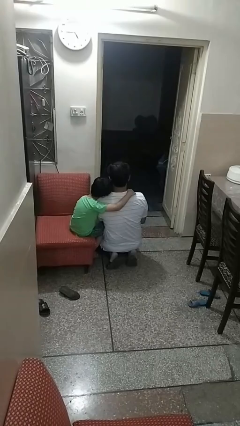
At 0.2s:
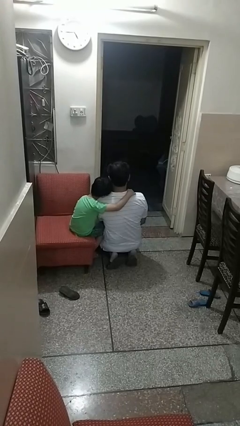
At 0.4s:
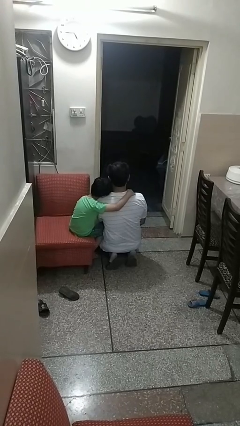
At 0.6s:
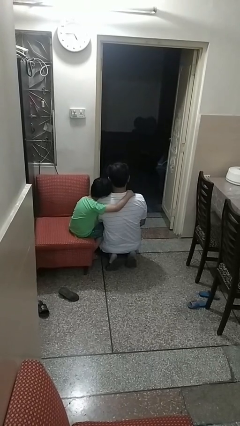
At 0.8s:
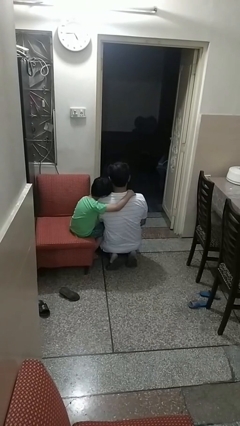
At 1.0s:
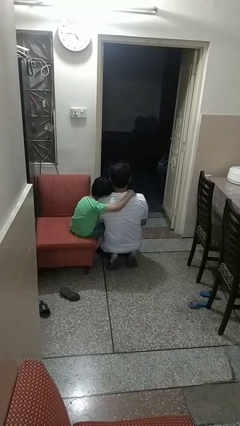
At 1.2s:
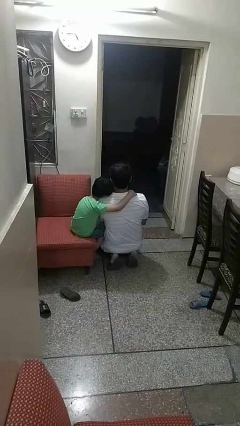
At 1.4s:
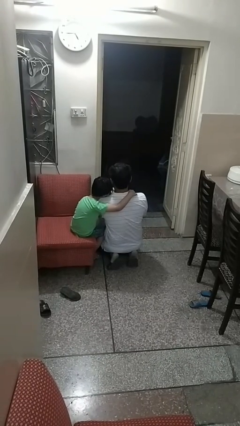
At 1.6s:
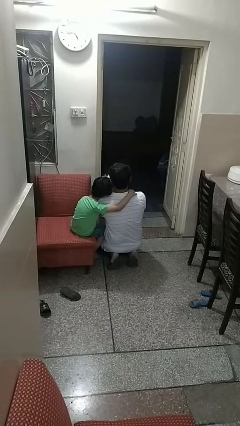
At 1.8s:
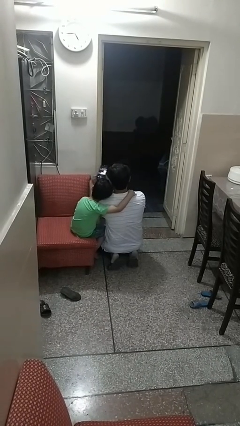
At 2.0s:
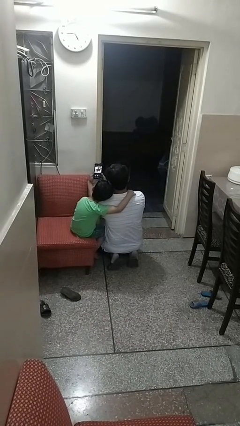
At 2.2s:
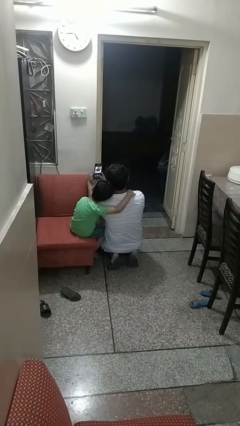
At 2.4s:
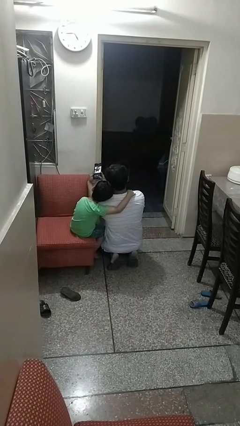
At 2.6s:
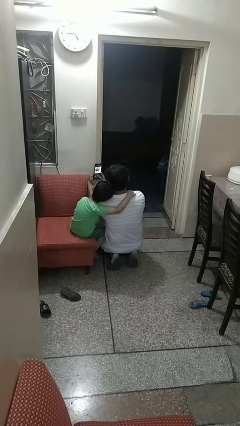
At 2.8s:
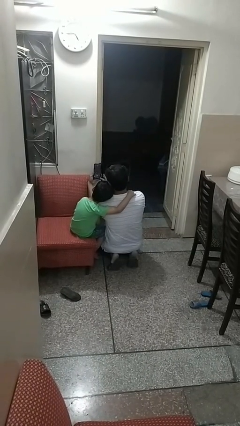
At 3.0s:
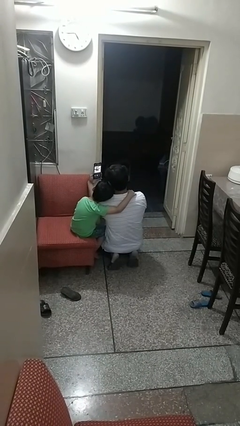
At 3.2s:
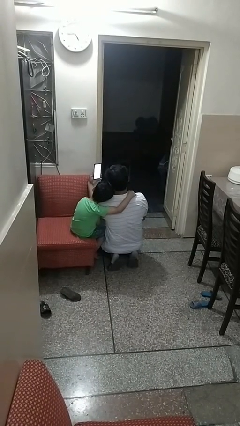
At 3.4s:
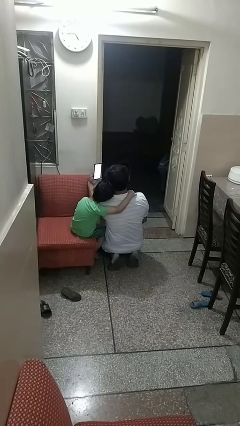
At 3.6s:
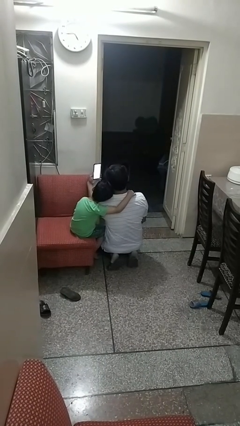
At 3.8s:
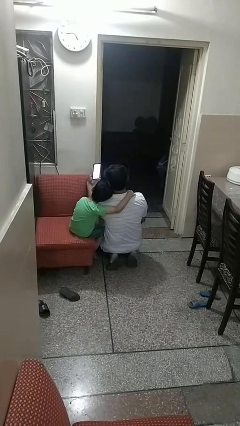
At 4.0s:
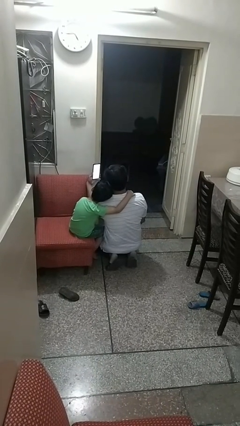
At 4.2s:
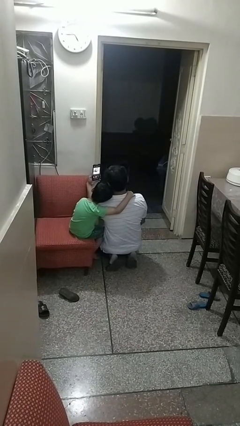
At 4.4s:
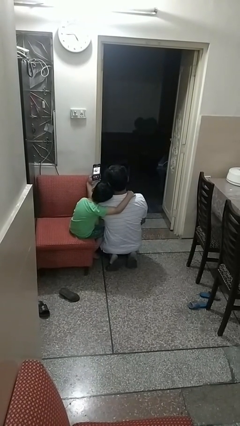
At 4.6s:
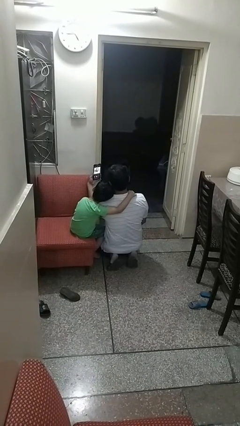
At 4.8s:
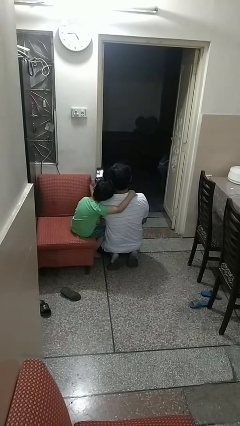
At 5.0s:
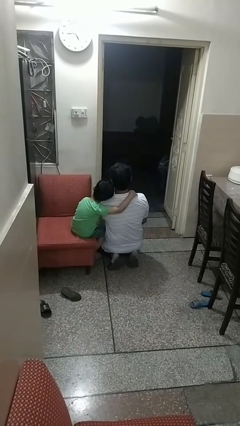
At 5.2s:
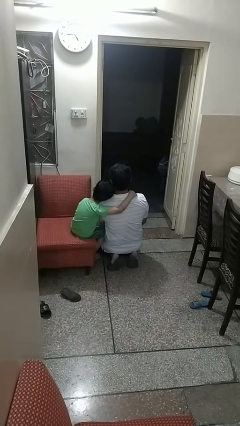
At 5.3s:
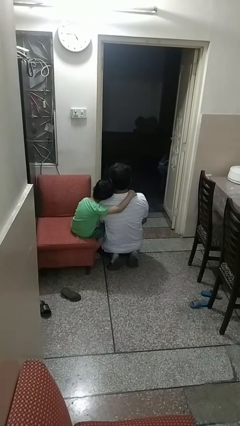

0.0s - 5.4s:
person takes selfie with person

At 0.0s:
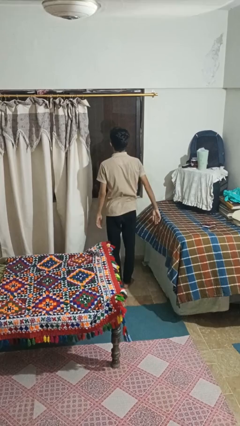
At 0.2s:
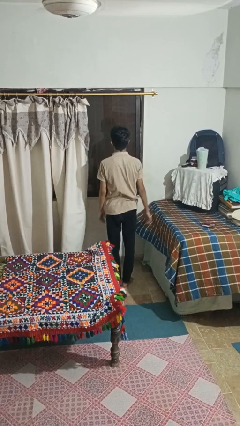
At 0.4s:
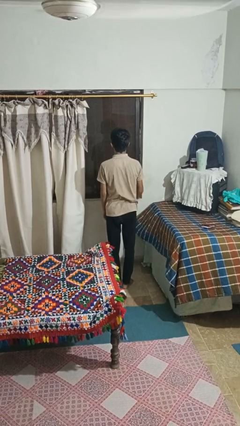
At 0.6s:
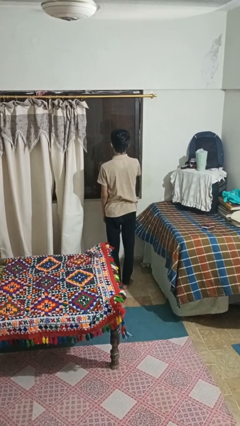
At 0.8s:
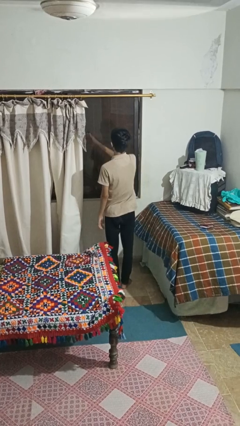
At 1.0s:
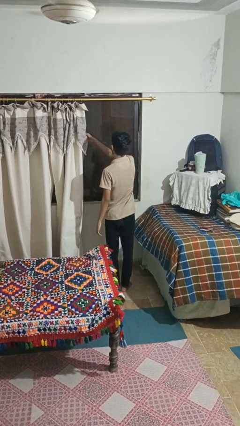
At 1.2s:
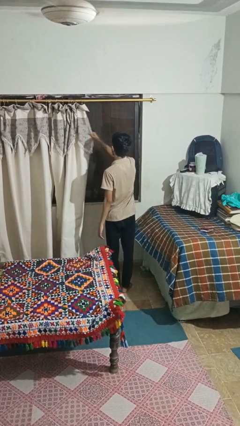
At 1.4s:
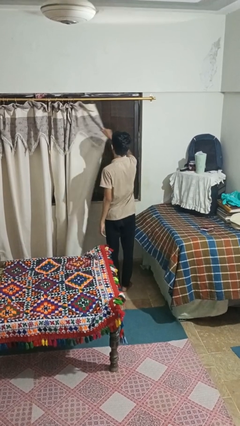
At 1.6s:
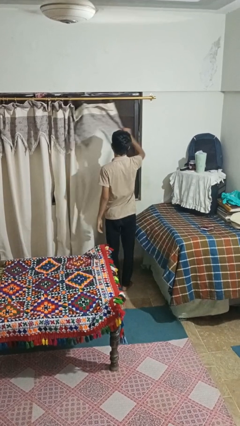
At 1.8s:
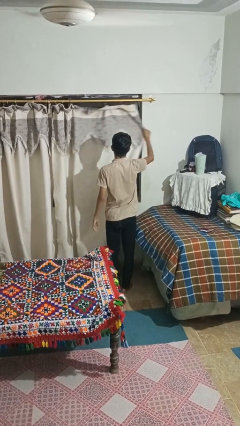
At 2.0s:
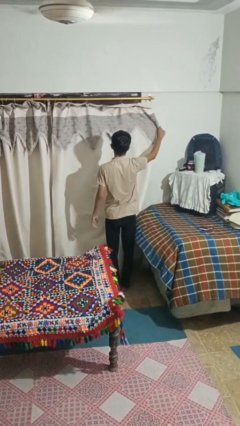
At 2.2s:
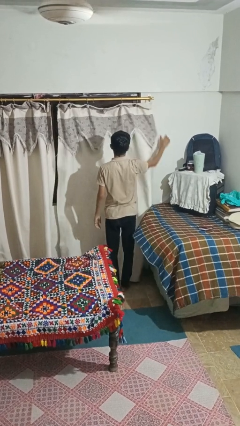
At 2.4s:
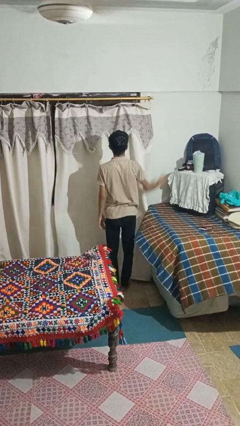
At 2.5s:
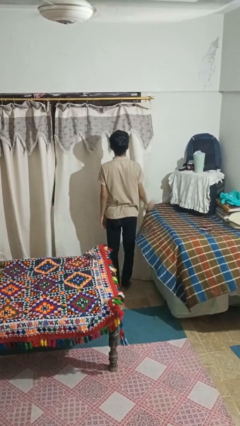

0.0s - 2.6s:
person closes curtains

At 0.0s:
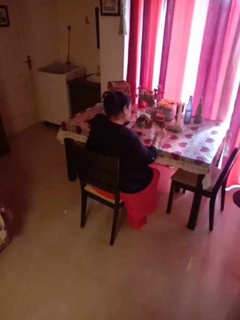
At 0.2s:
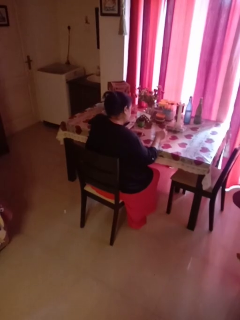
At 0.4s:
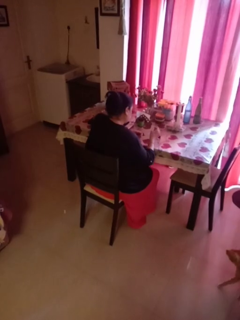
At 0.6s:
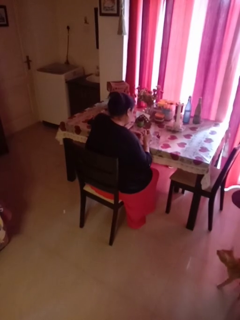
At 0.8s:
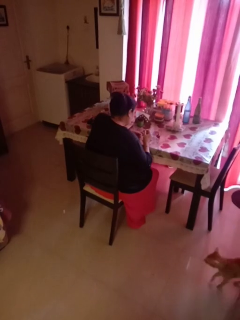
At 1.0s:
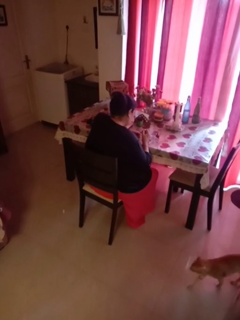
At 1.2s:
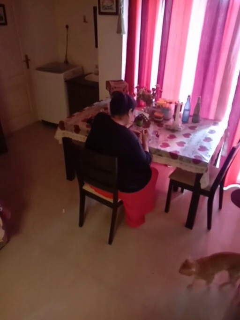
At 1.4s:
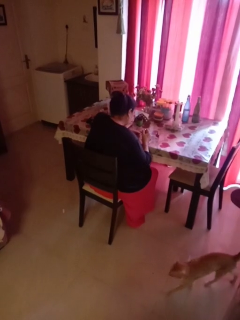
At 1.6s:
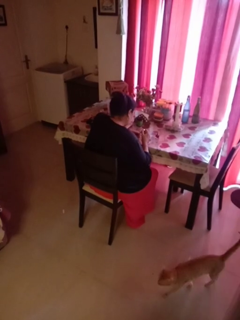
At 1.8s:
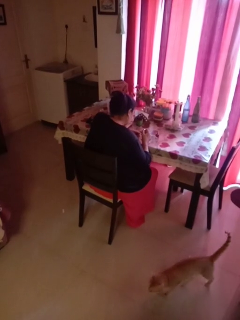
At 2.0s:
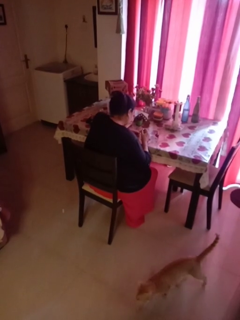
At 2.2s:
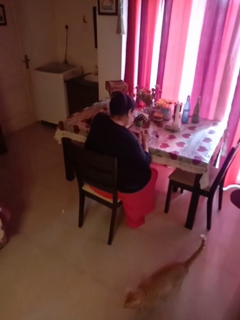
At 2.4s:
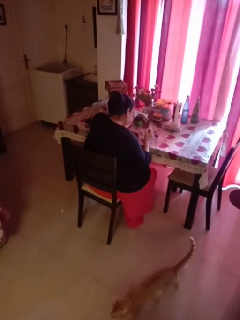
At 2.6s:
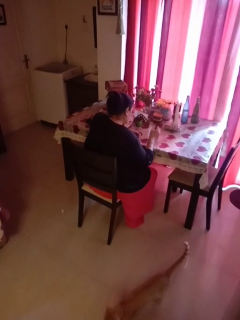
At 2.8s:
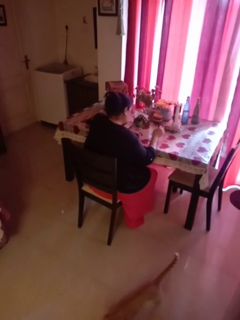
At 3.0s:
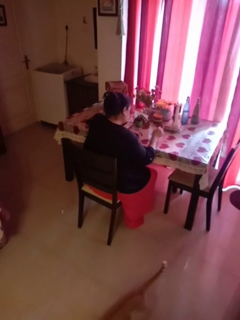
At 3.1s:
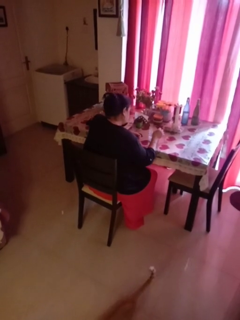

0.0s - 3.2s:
person paints fingernails

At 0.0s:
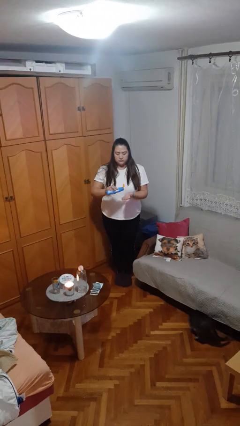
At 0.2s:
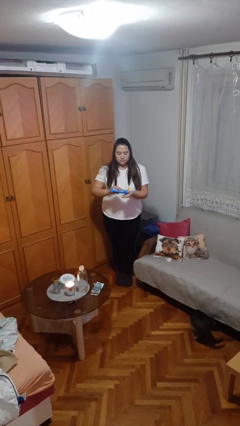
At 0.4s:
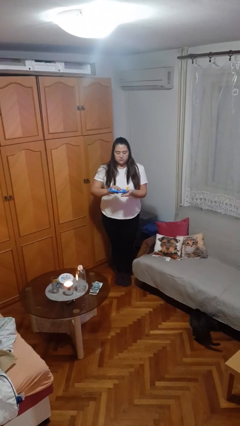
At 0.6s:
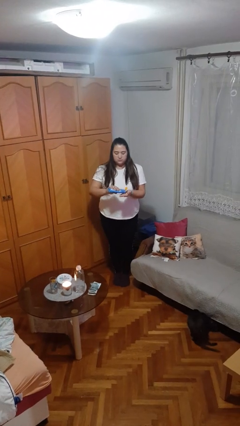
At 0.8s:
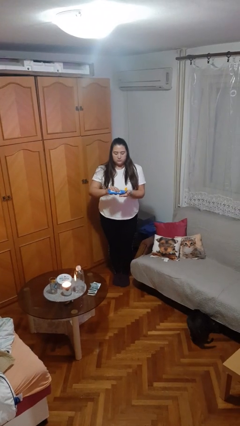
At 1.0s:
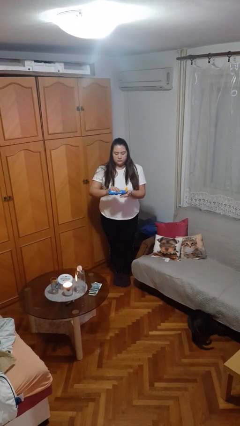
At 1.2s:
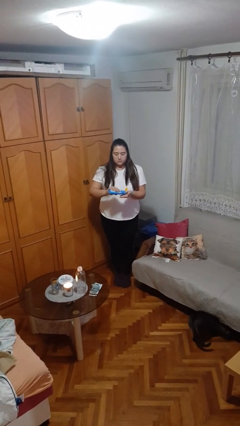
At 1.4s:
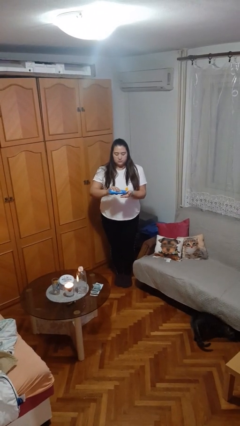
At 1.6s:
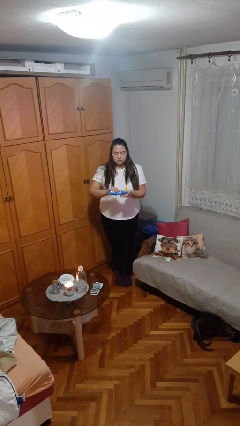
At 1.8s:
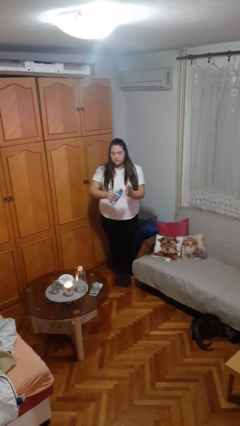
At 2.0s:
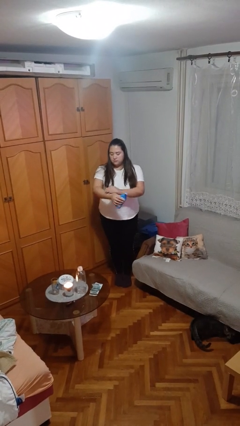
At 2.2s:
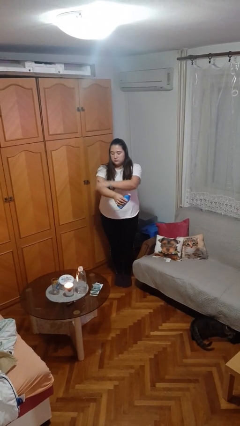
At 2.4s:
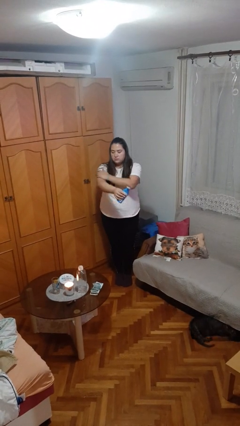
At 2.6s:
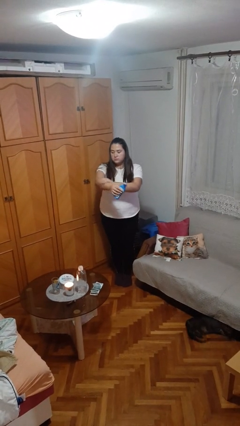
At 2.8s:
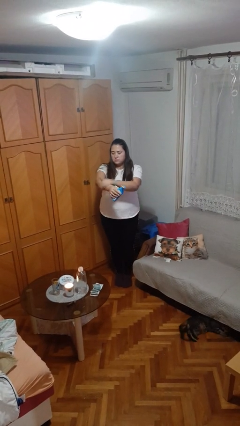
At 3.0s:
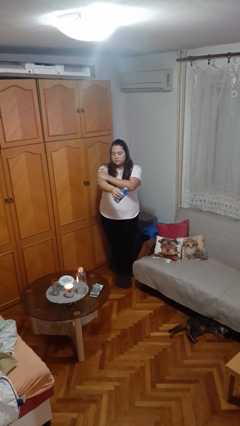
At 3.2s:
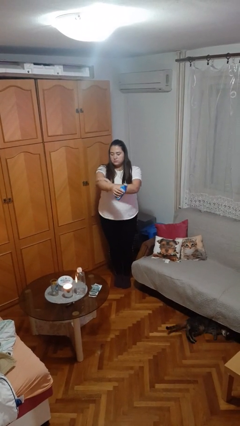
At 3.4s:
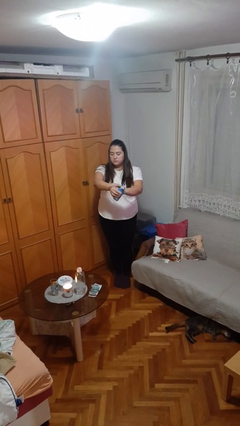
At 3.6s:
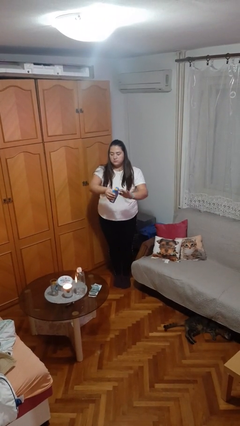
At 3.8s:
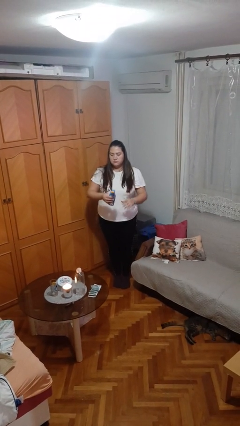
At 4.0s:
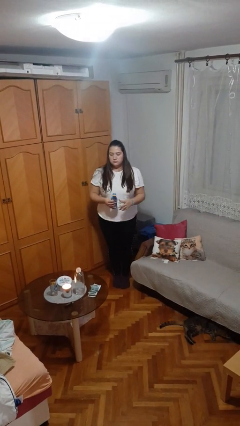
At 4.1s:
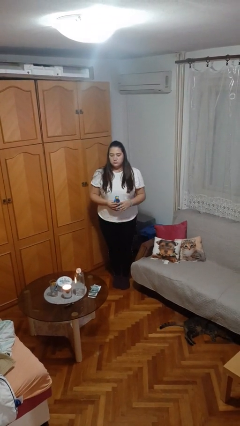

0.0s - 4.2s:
person applies sunscreen

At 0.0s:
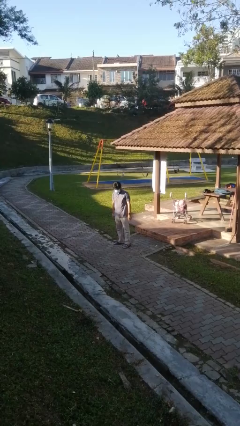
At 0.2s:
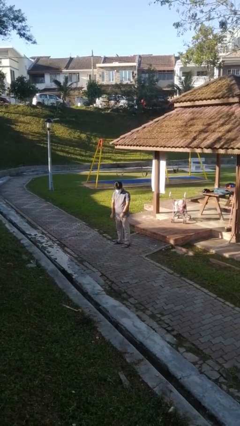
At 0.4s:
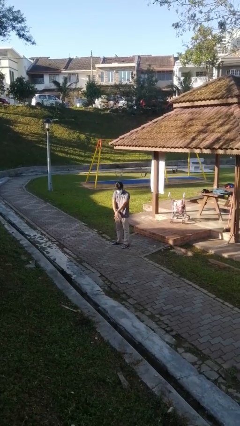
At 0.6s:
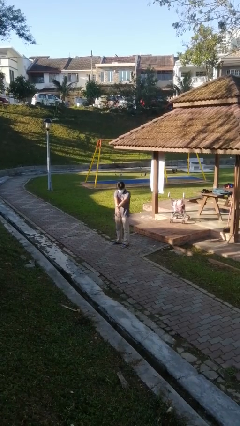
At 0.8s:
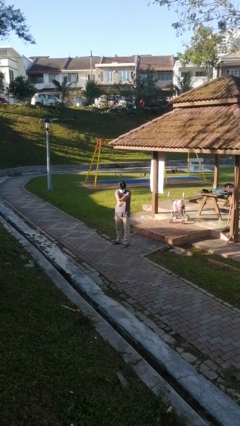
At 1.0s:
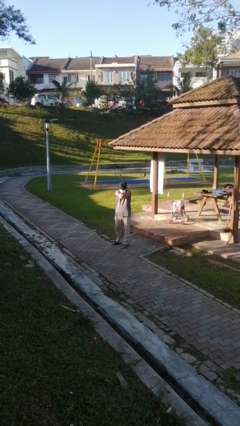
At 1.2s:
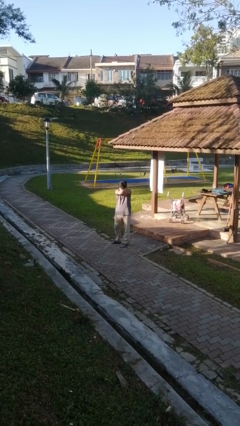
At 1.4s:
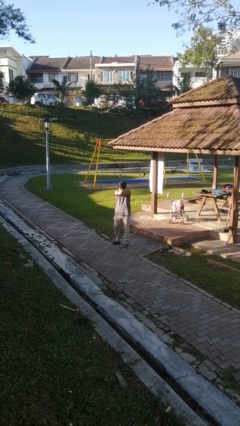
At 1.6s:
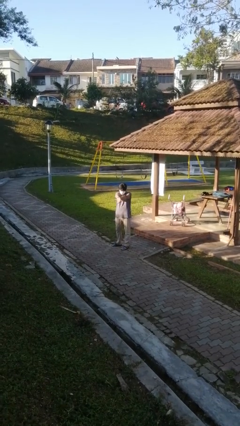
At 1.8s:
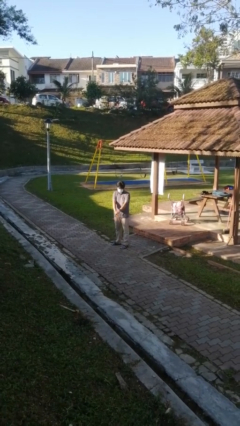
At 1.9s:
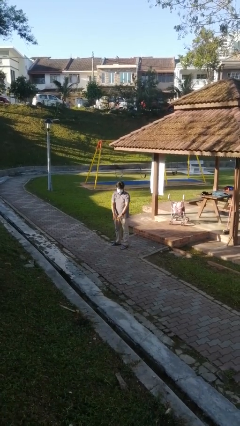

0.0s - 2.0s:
person crosses arms

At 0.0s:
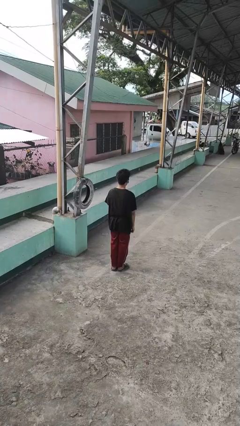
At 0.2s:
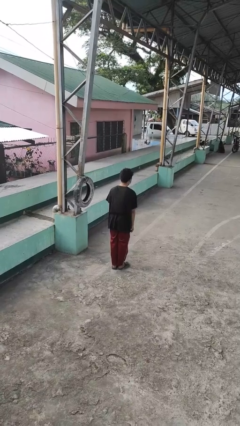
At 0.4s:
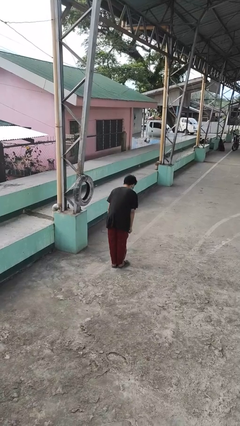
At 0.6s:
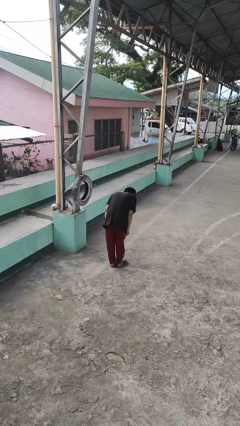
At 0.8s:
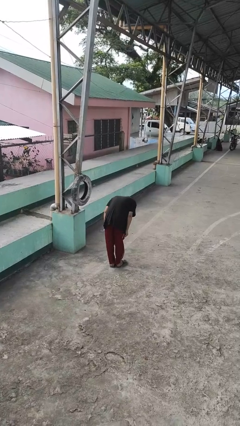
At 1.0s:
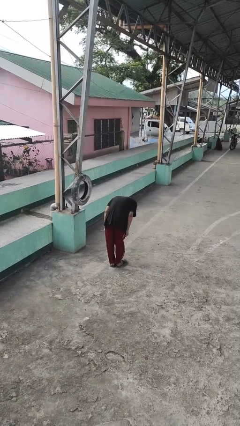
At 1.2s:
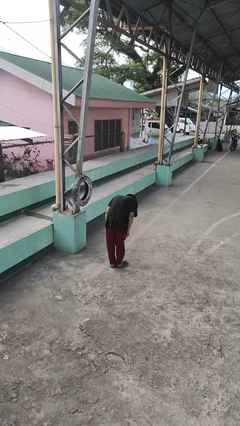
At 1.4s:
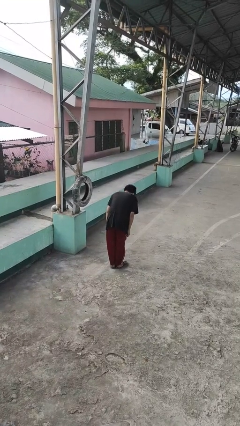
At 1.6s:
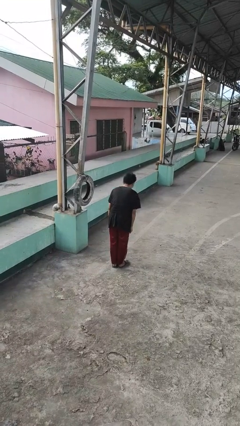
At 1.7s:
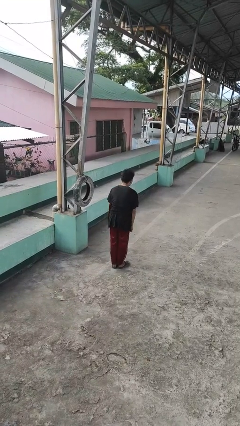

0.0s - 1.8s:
person bows
